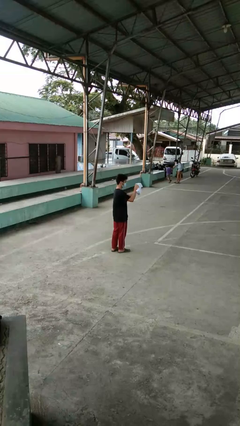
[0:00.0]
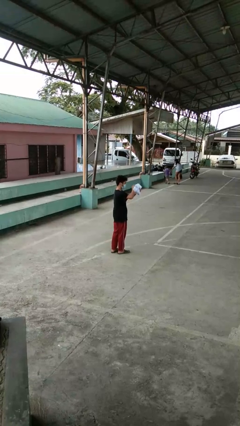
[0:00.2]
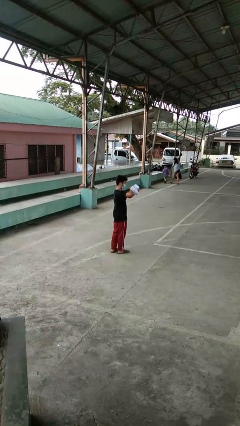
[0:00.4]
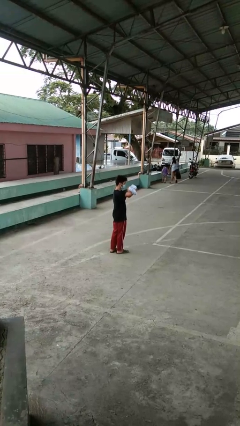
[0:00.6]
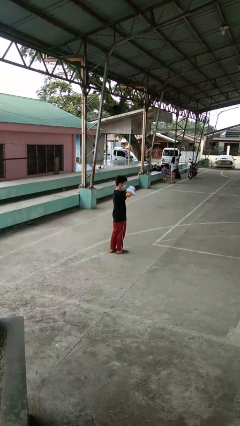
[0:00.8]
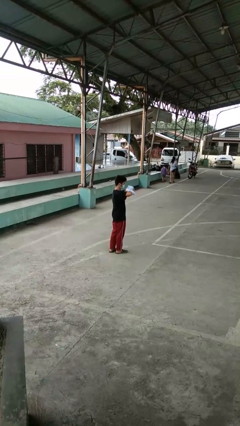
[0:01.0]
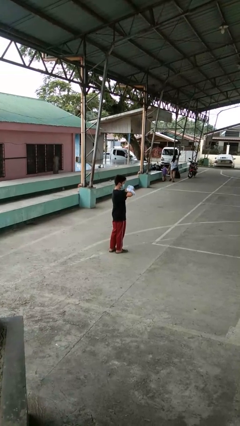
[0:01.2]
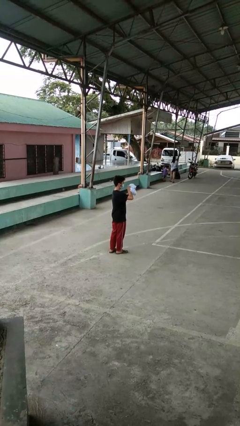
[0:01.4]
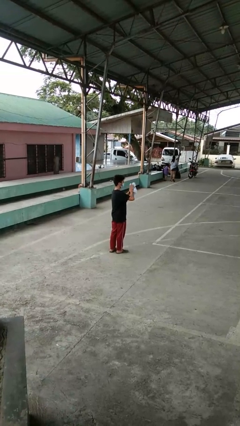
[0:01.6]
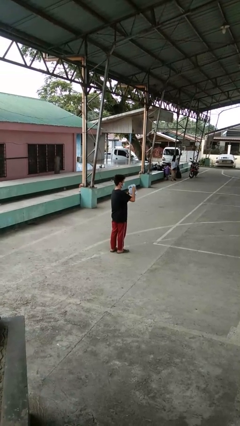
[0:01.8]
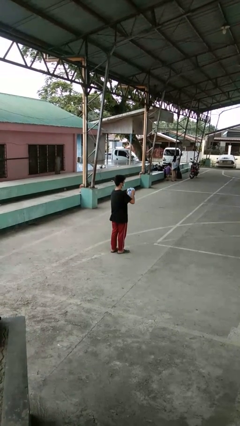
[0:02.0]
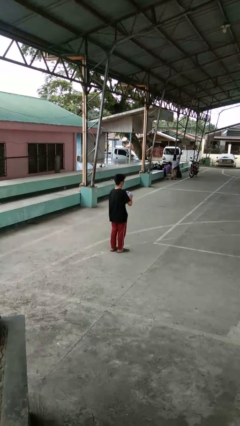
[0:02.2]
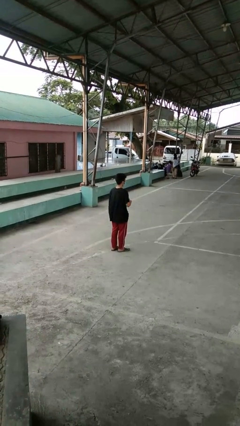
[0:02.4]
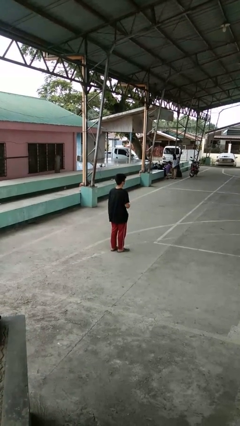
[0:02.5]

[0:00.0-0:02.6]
person squeezes object

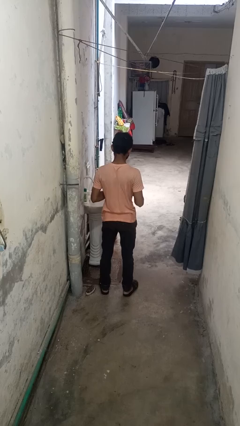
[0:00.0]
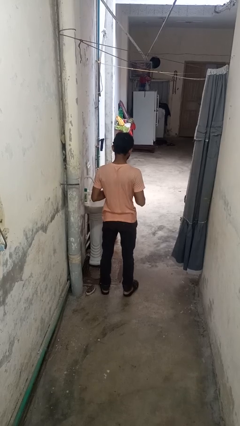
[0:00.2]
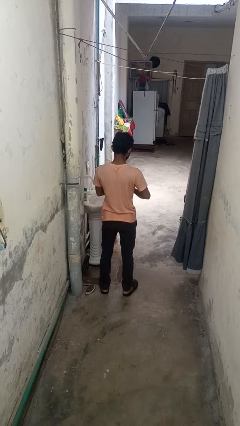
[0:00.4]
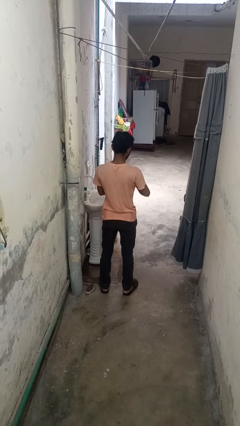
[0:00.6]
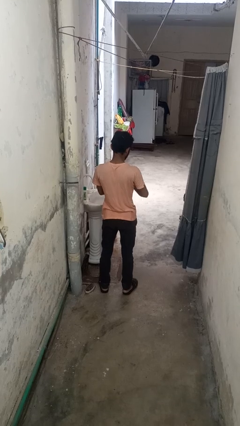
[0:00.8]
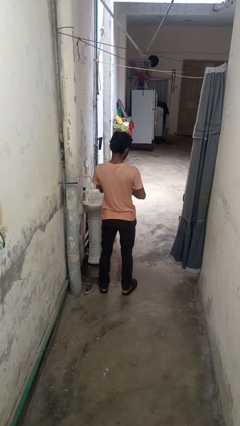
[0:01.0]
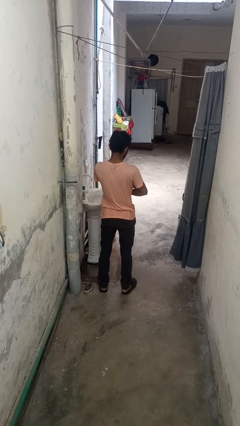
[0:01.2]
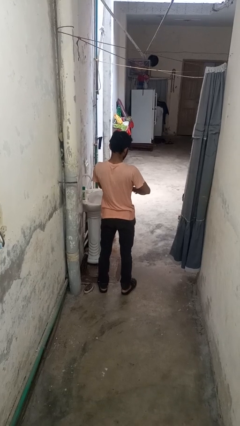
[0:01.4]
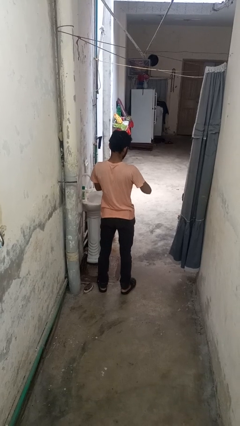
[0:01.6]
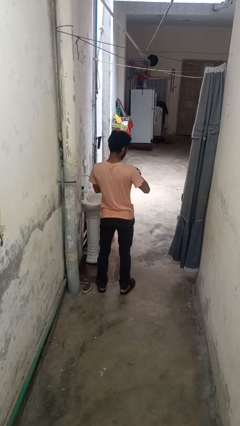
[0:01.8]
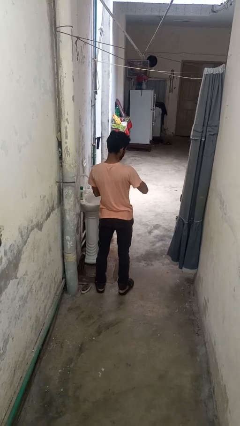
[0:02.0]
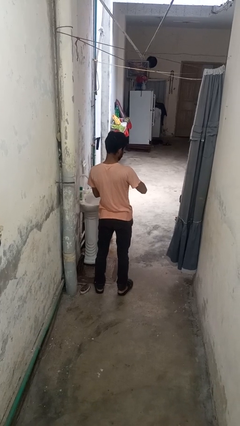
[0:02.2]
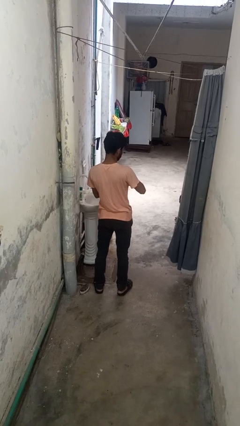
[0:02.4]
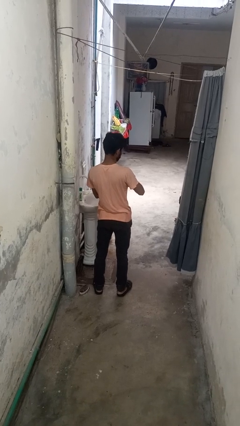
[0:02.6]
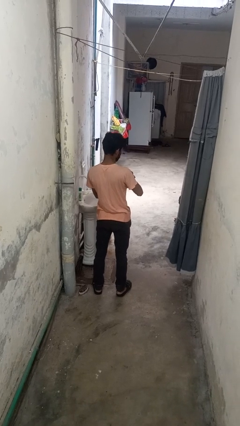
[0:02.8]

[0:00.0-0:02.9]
person puts on wristwatch

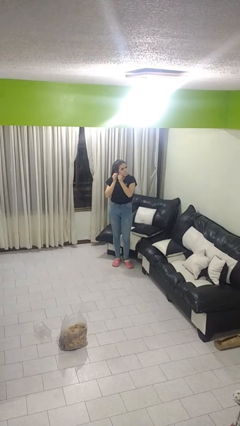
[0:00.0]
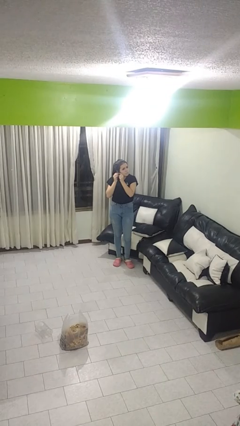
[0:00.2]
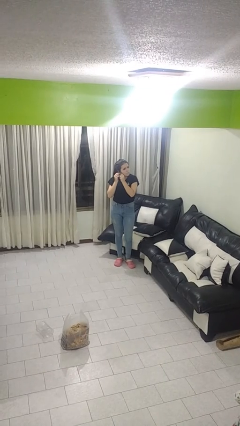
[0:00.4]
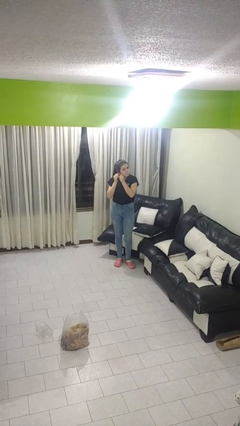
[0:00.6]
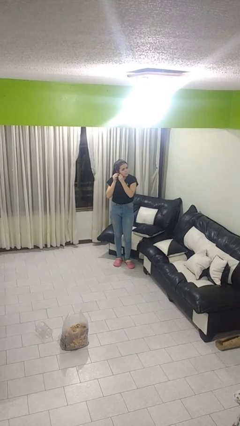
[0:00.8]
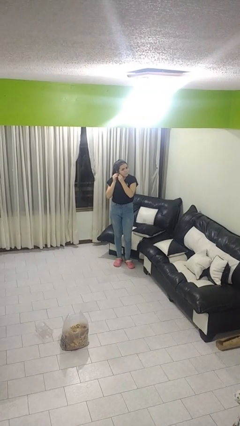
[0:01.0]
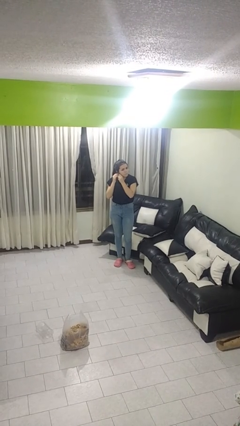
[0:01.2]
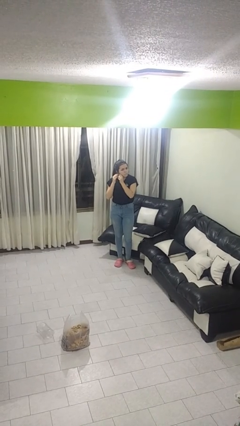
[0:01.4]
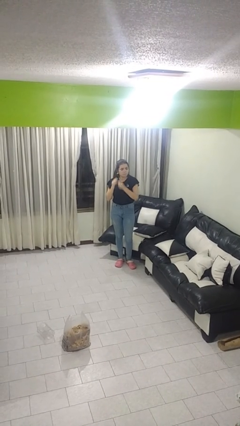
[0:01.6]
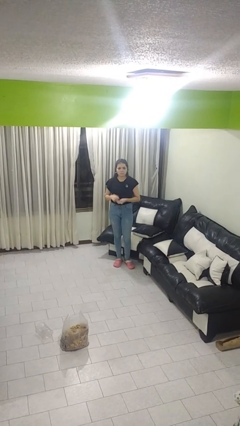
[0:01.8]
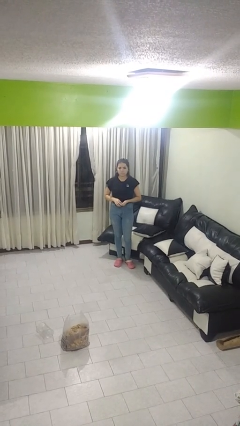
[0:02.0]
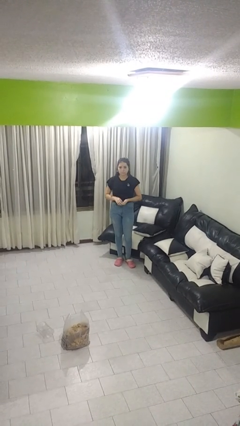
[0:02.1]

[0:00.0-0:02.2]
person puts on earrings

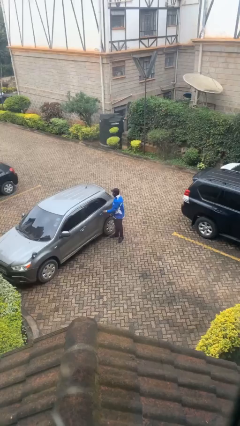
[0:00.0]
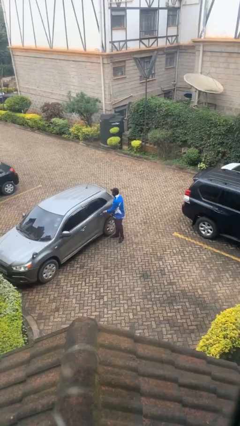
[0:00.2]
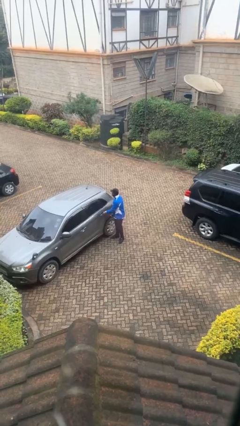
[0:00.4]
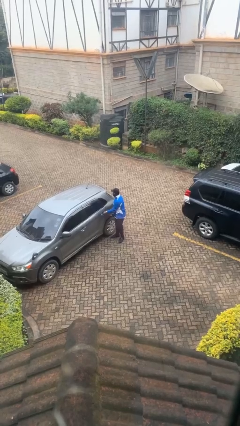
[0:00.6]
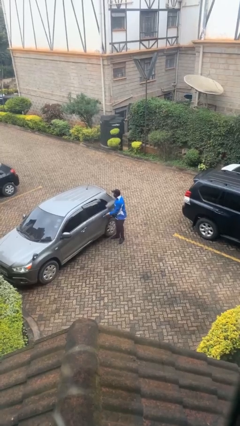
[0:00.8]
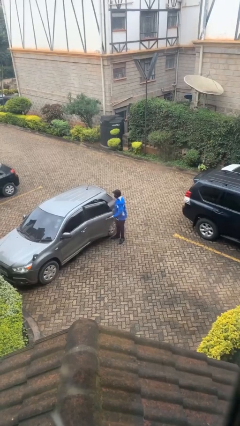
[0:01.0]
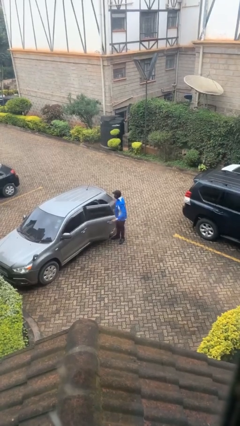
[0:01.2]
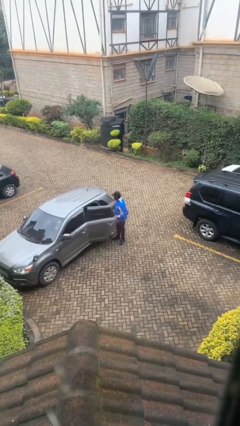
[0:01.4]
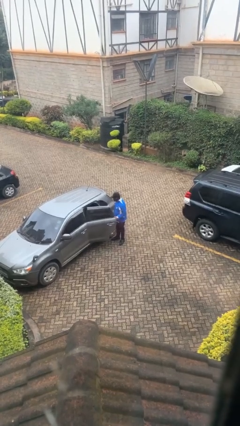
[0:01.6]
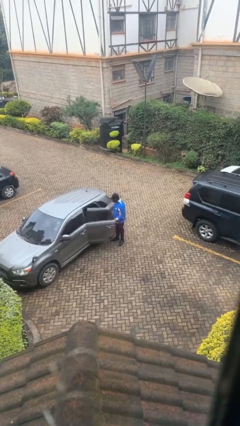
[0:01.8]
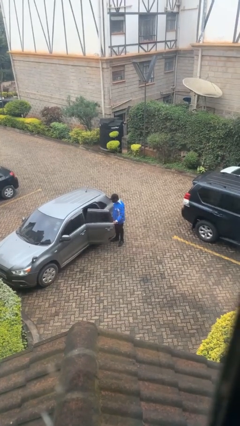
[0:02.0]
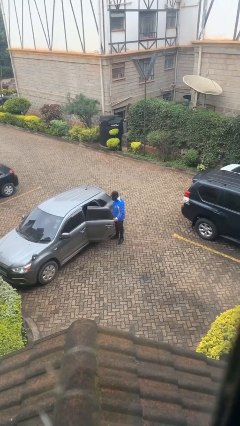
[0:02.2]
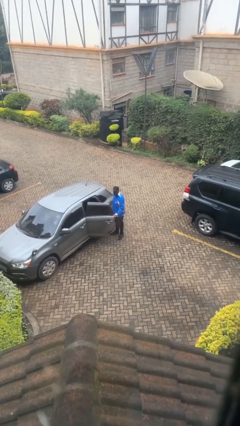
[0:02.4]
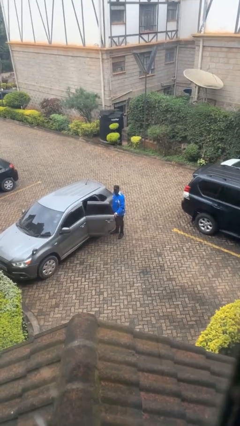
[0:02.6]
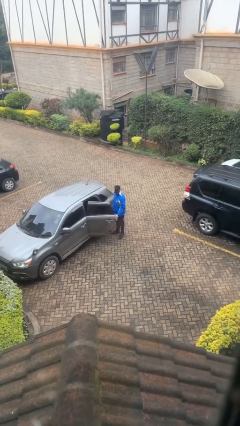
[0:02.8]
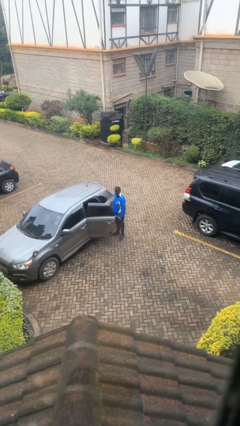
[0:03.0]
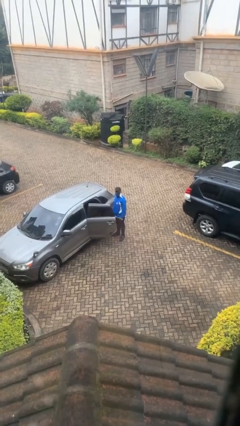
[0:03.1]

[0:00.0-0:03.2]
person opens car door

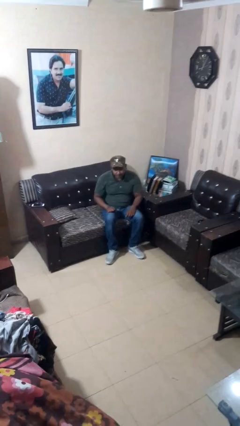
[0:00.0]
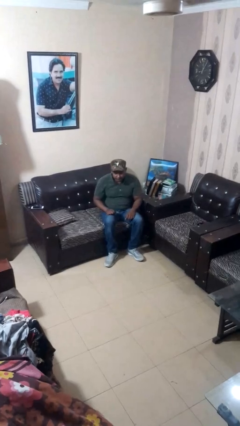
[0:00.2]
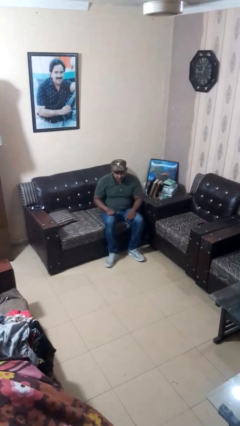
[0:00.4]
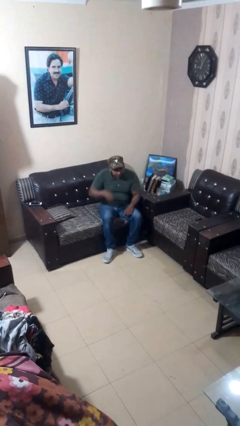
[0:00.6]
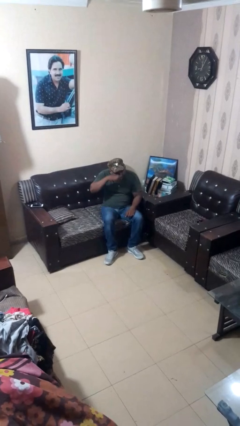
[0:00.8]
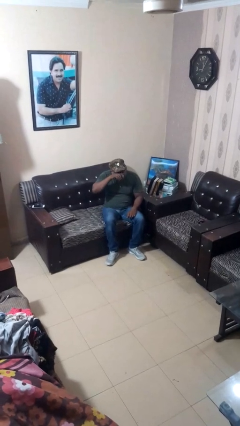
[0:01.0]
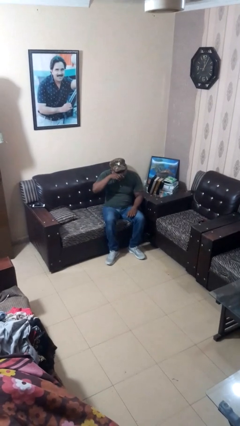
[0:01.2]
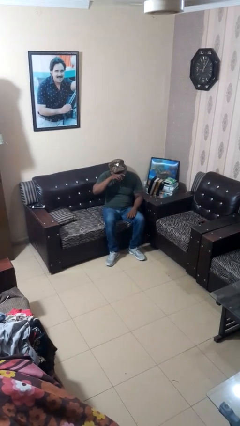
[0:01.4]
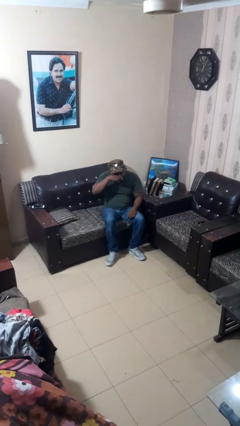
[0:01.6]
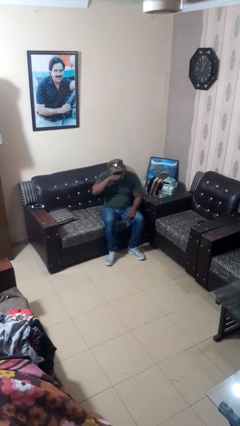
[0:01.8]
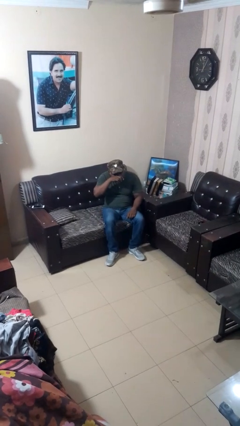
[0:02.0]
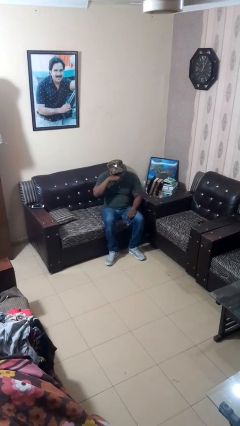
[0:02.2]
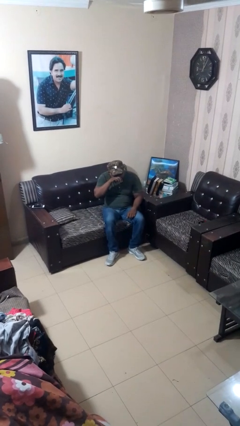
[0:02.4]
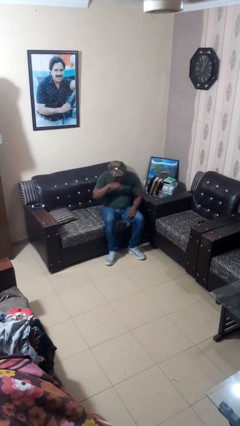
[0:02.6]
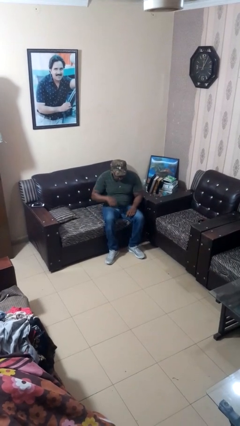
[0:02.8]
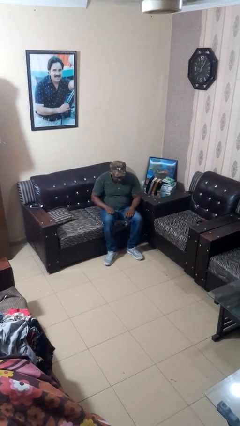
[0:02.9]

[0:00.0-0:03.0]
person rubs eyes

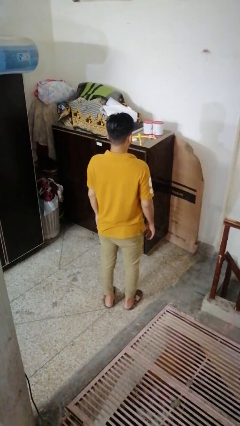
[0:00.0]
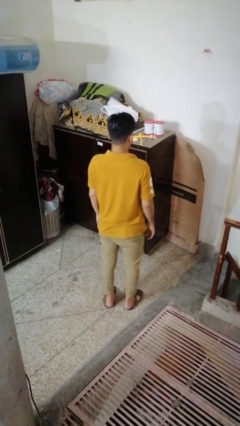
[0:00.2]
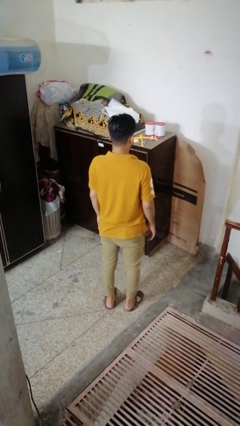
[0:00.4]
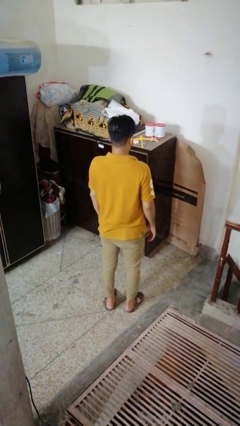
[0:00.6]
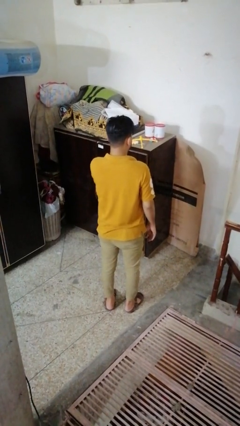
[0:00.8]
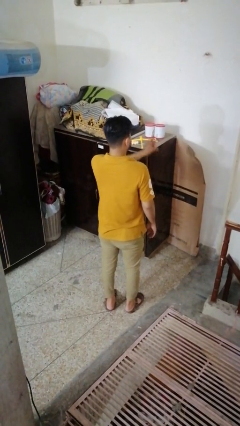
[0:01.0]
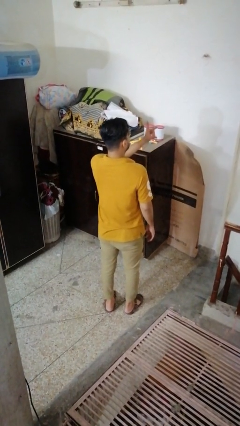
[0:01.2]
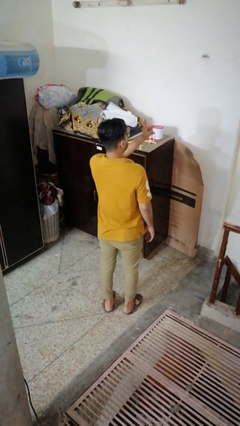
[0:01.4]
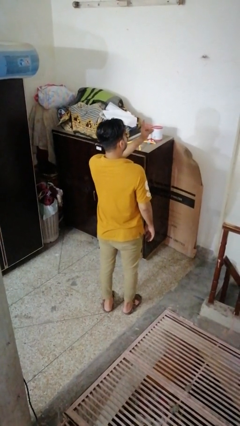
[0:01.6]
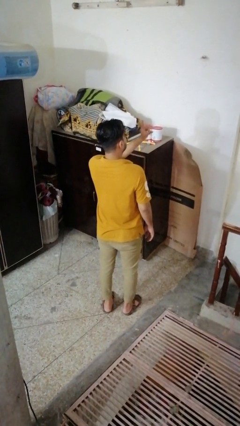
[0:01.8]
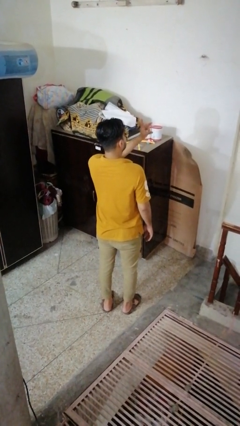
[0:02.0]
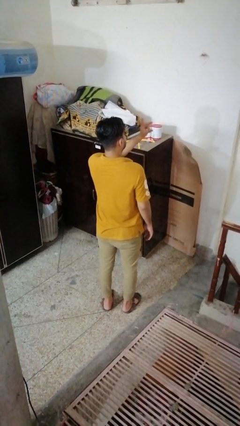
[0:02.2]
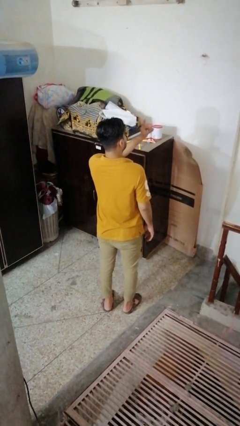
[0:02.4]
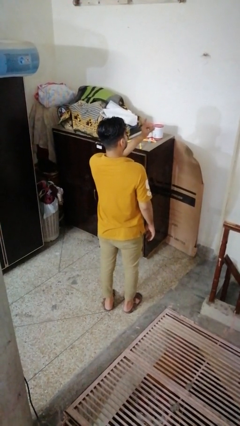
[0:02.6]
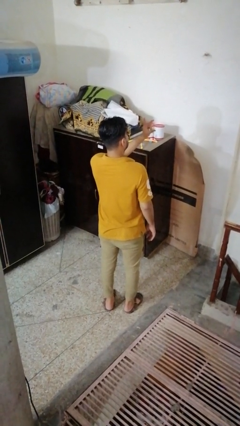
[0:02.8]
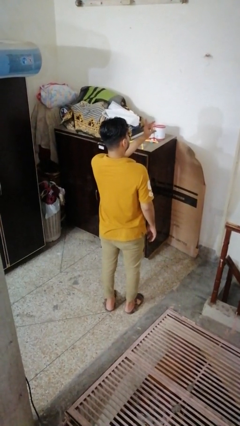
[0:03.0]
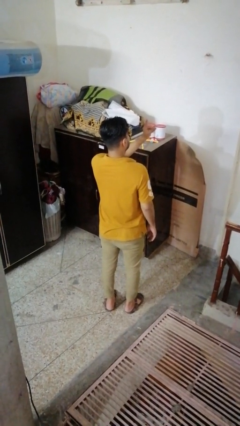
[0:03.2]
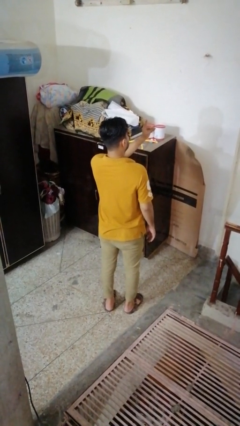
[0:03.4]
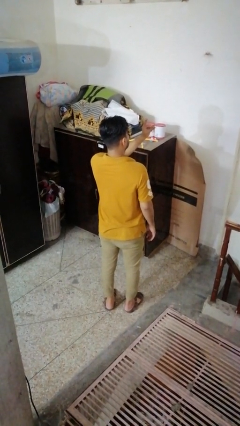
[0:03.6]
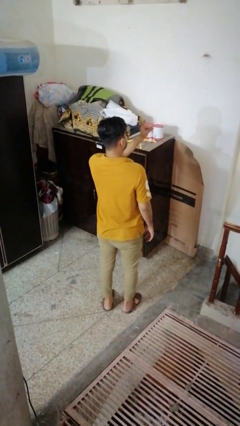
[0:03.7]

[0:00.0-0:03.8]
person snaps fingers
